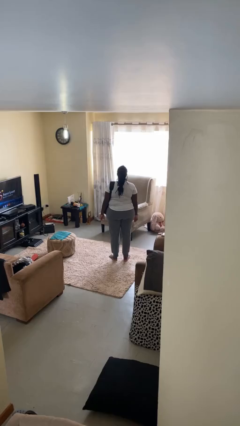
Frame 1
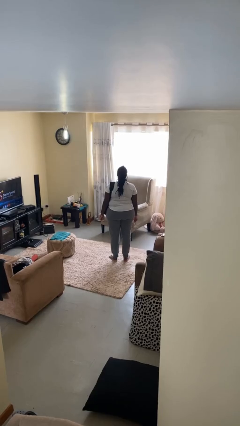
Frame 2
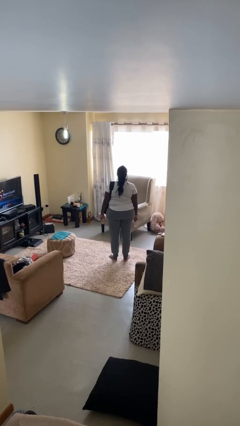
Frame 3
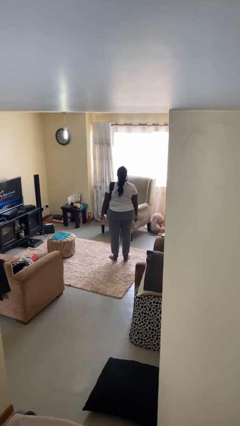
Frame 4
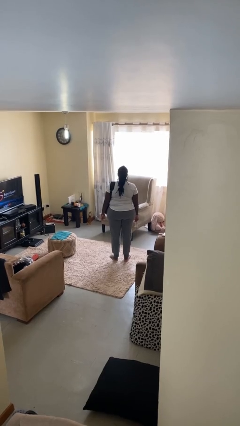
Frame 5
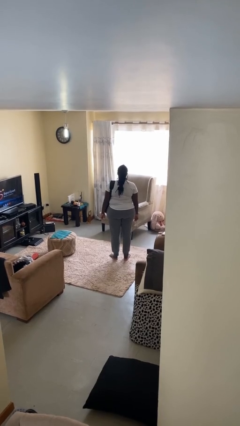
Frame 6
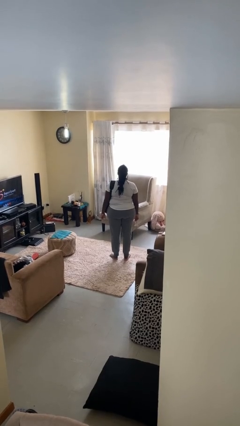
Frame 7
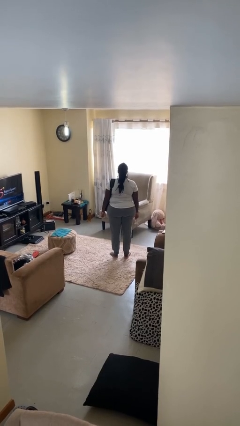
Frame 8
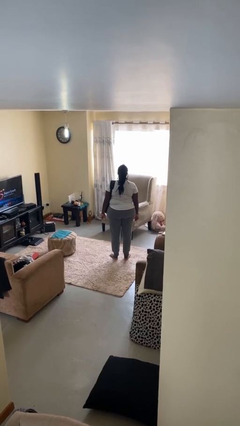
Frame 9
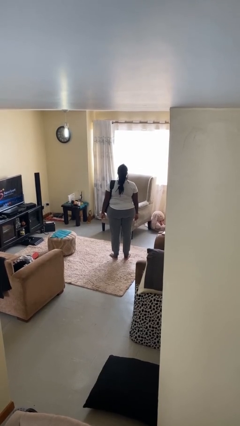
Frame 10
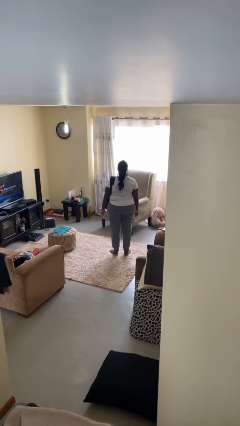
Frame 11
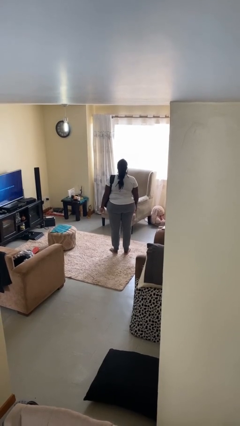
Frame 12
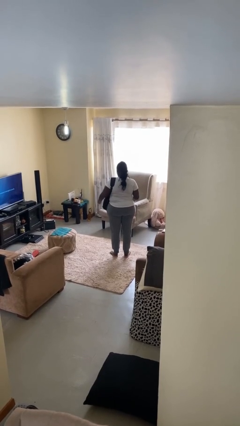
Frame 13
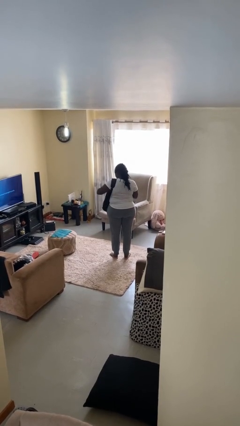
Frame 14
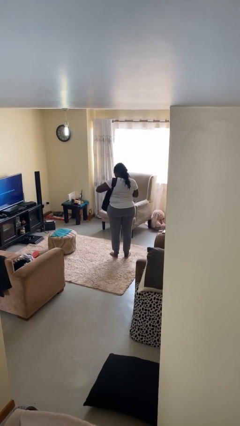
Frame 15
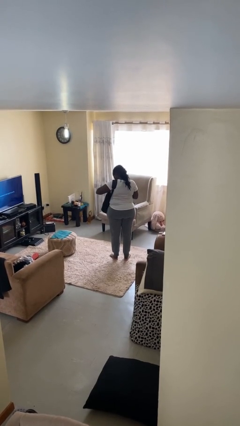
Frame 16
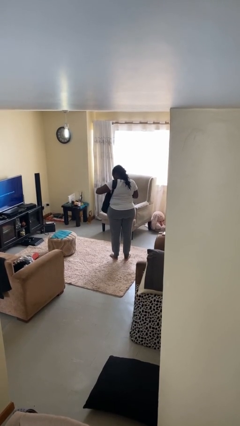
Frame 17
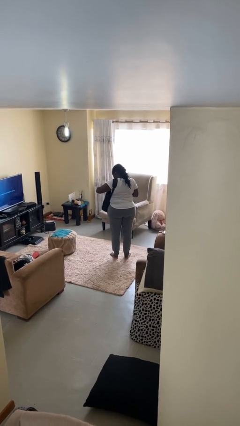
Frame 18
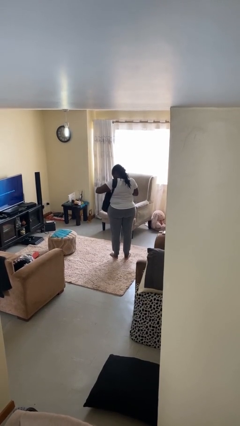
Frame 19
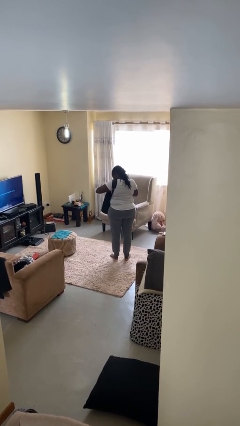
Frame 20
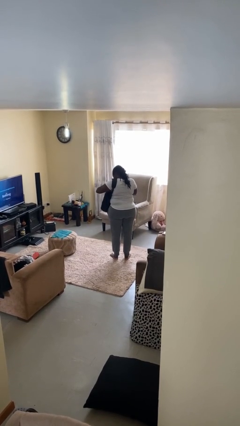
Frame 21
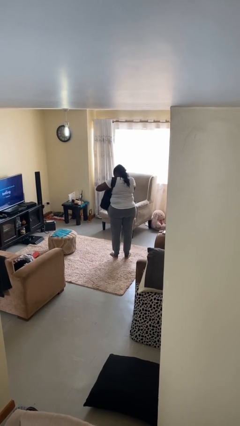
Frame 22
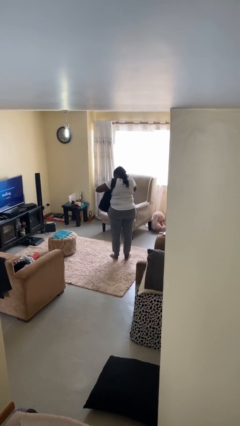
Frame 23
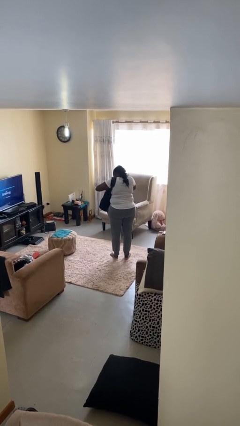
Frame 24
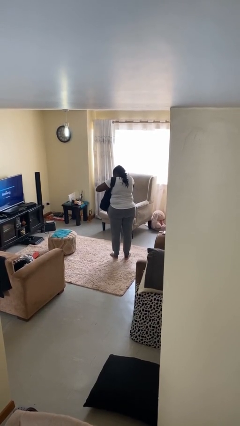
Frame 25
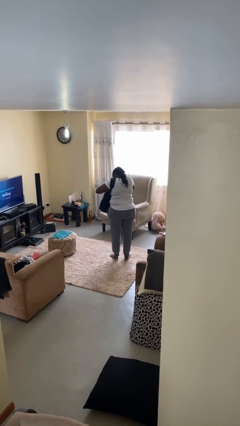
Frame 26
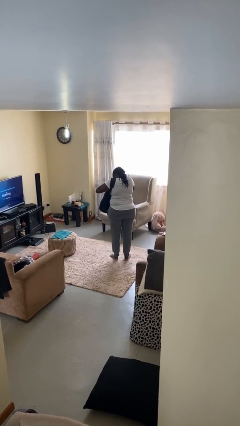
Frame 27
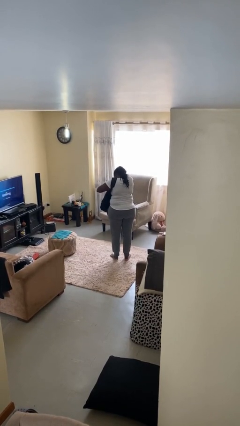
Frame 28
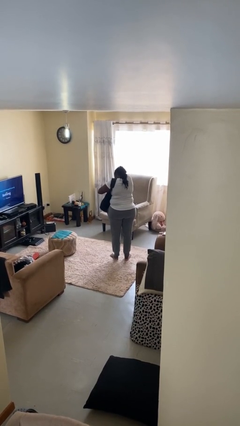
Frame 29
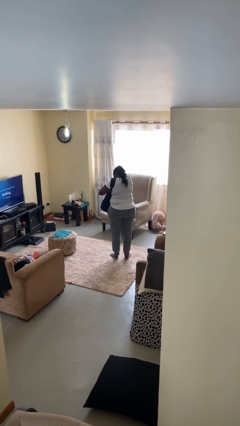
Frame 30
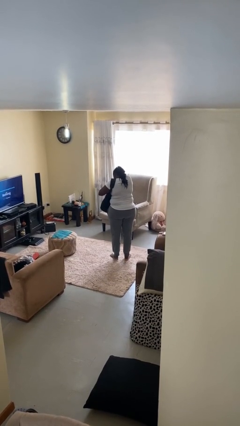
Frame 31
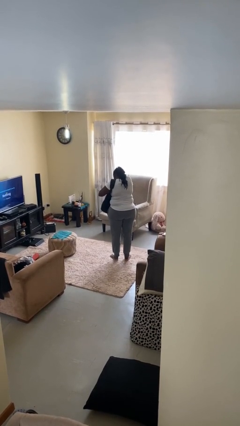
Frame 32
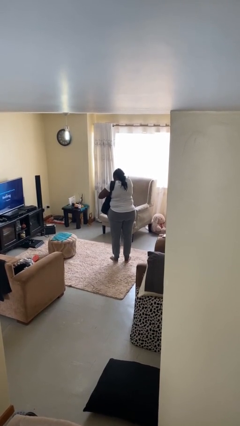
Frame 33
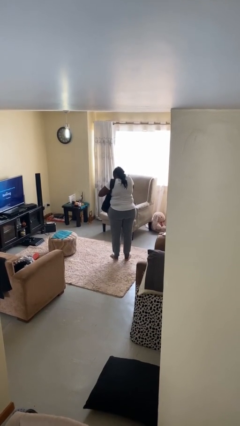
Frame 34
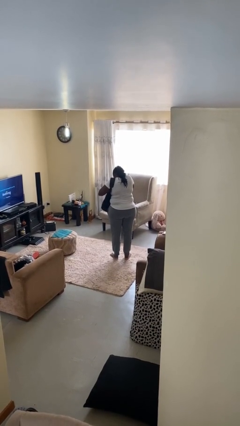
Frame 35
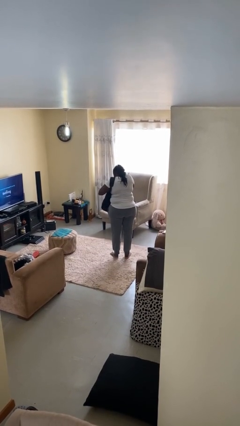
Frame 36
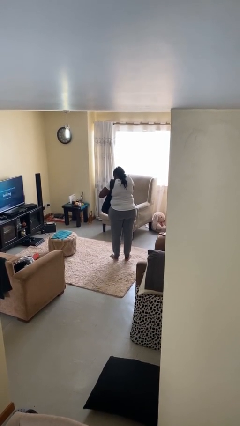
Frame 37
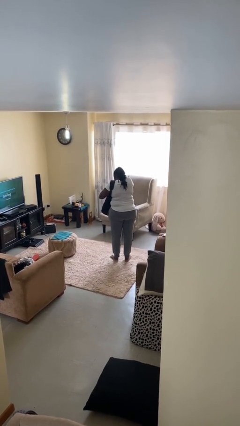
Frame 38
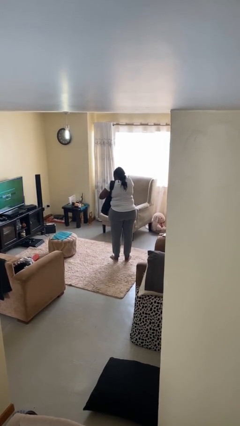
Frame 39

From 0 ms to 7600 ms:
person searches in backpack

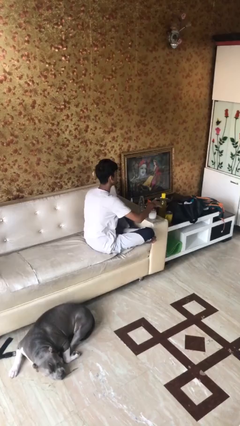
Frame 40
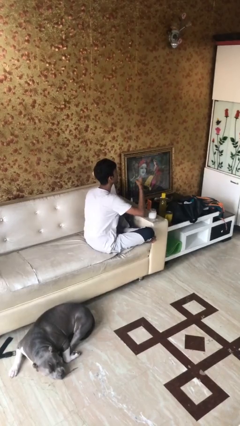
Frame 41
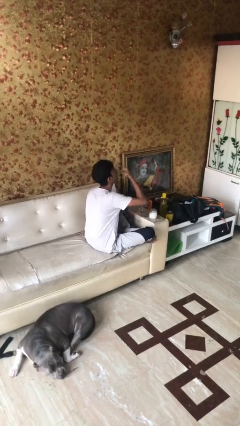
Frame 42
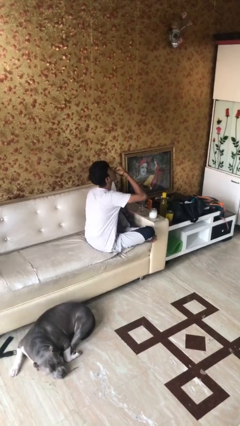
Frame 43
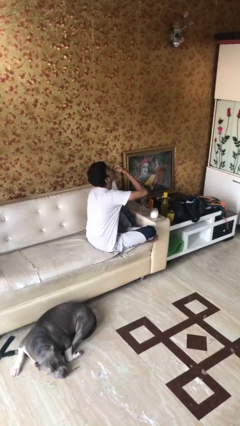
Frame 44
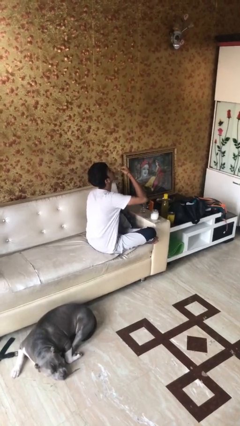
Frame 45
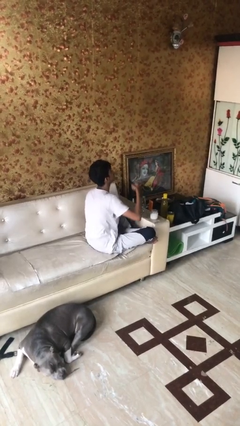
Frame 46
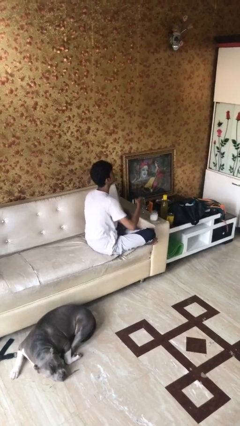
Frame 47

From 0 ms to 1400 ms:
person takes medicine pills

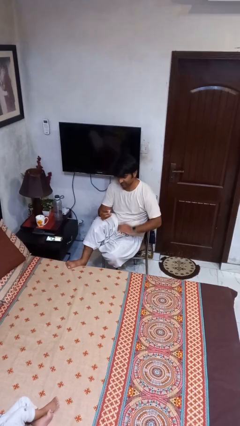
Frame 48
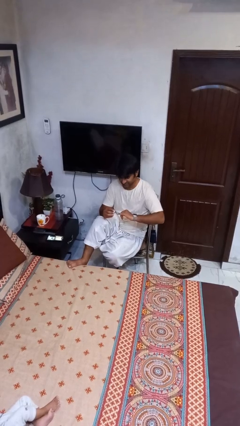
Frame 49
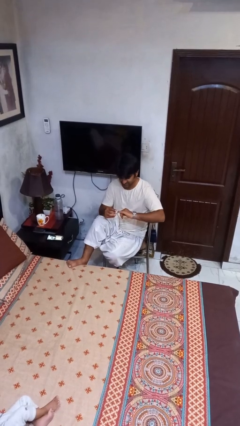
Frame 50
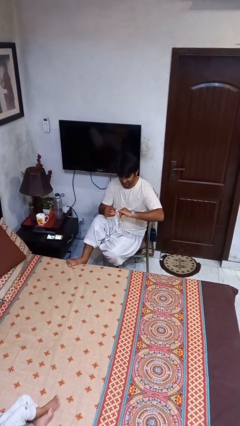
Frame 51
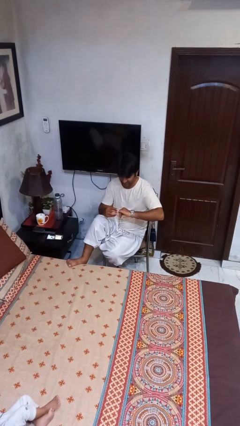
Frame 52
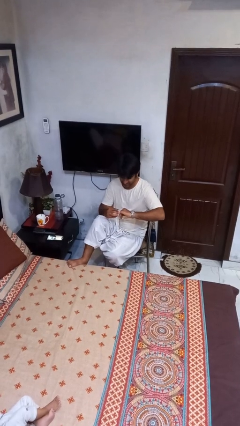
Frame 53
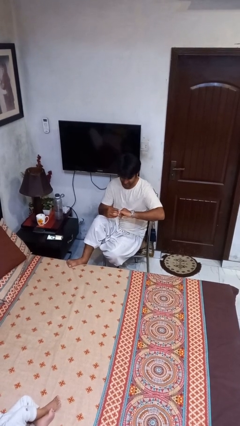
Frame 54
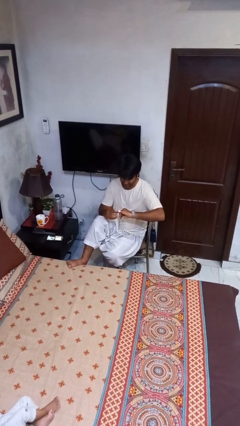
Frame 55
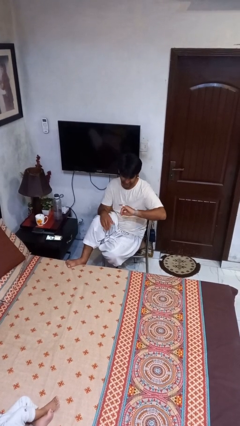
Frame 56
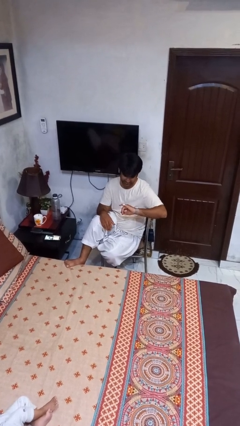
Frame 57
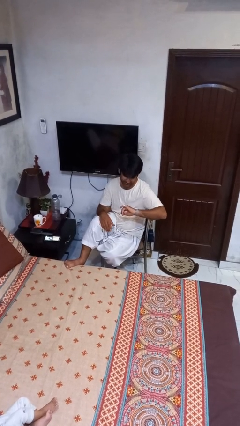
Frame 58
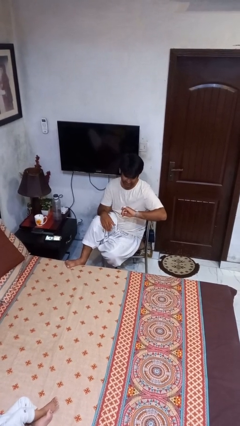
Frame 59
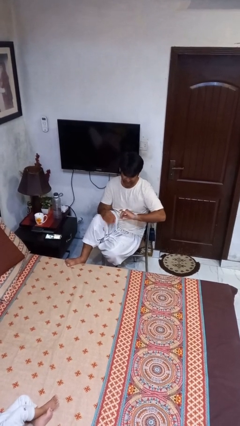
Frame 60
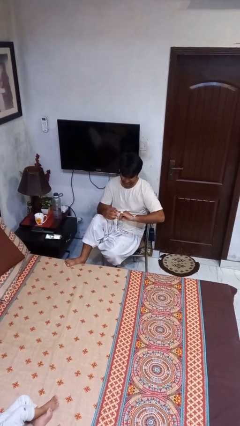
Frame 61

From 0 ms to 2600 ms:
person puts on ring

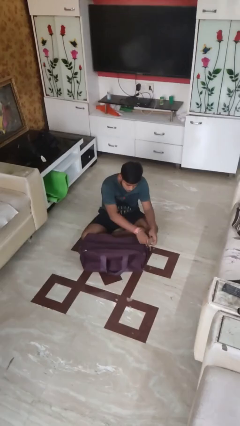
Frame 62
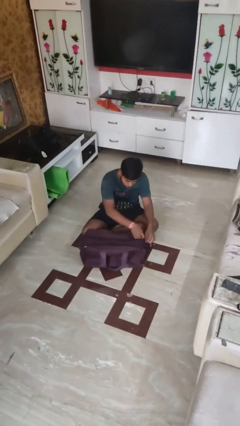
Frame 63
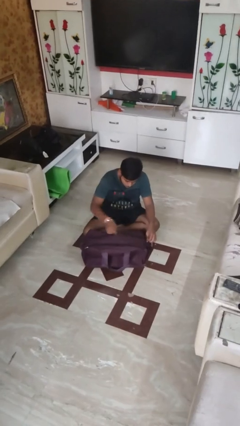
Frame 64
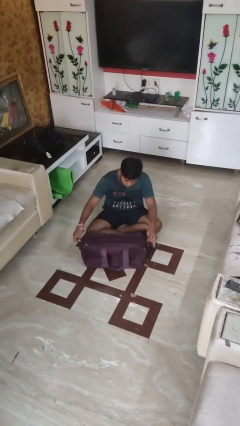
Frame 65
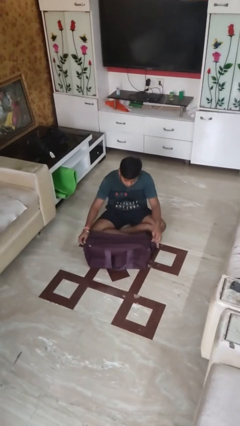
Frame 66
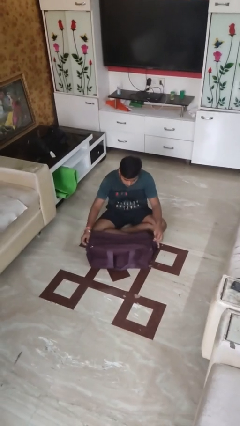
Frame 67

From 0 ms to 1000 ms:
person opens suitcase

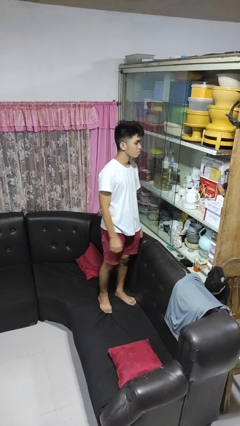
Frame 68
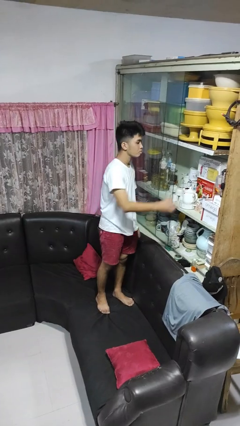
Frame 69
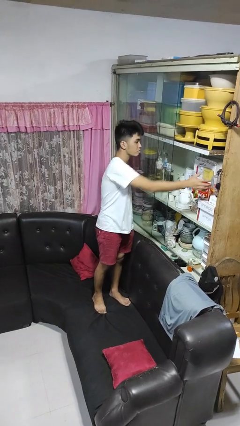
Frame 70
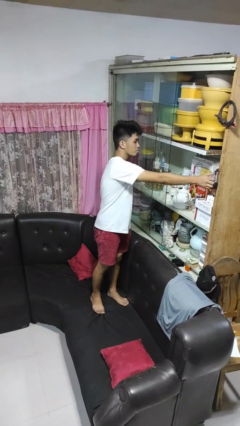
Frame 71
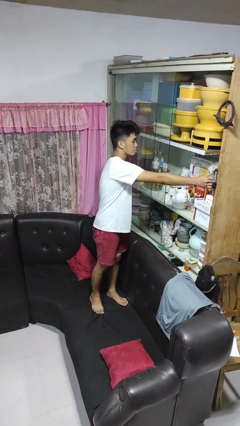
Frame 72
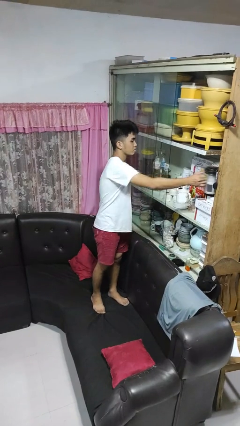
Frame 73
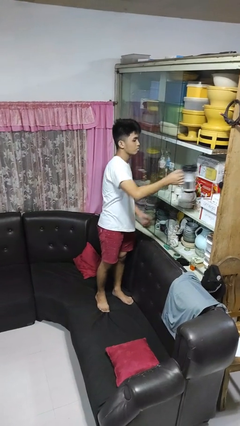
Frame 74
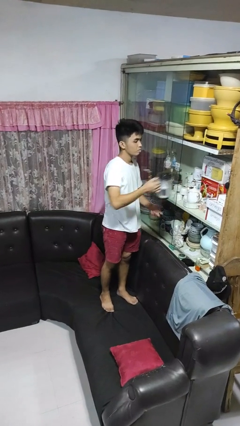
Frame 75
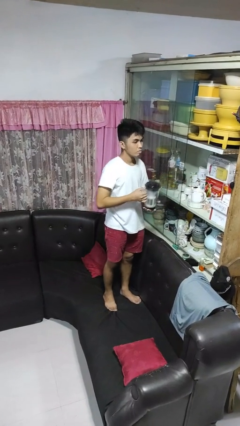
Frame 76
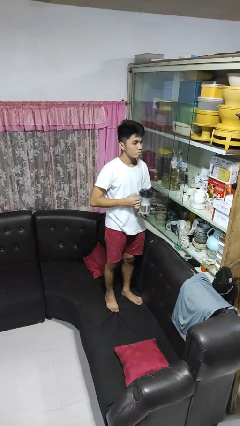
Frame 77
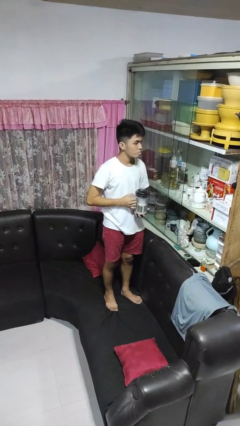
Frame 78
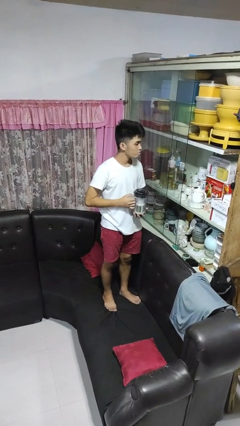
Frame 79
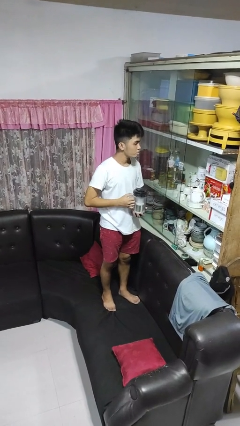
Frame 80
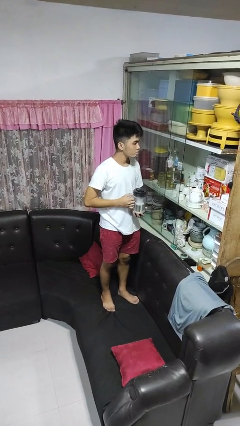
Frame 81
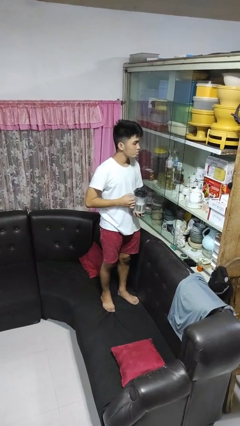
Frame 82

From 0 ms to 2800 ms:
person picks up object from cabinet

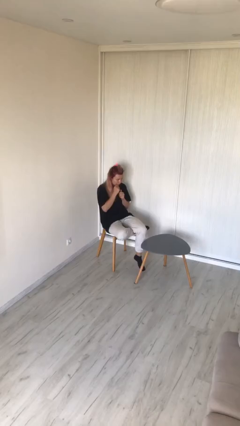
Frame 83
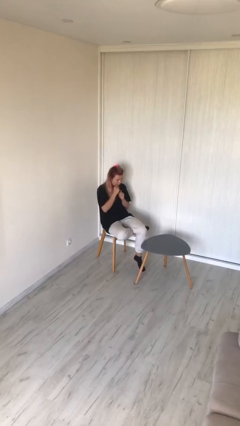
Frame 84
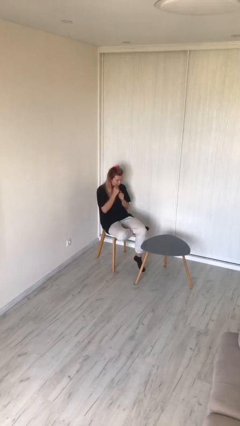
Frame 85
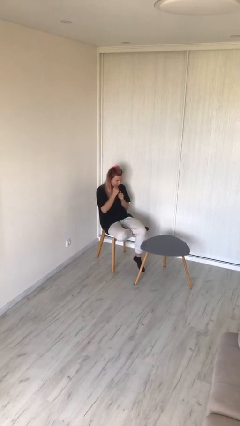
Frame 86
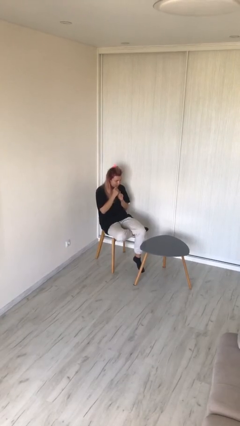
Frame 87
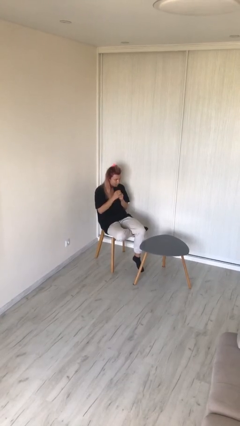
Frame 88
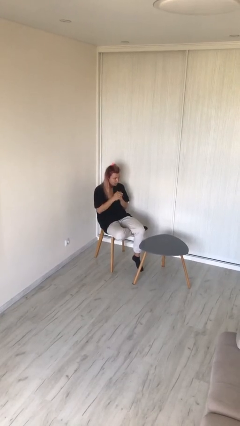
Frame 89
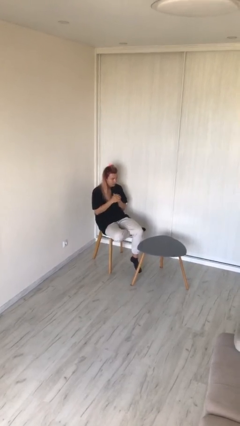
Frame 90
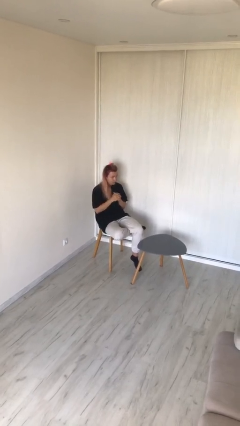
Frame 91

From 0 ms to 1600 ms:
person licks fingers

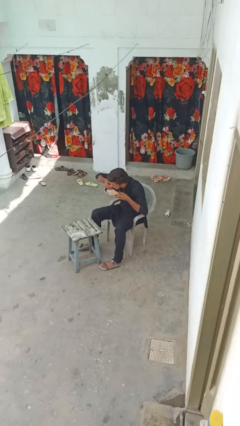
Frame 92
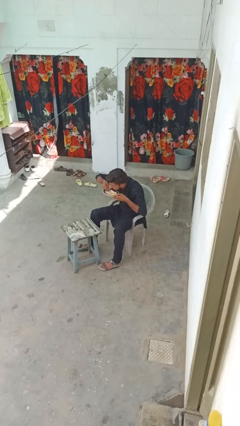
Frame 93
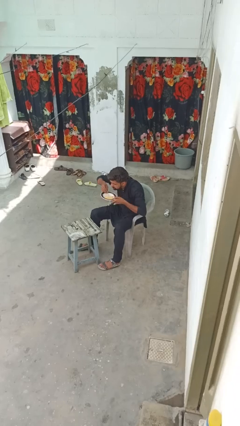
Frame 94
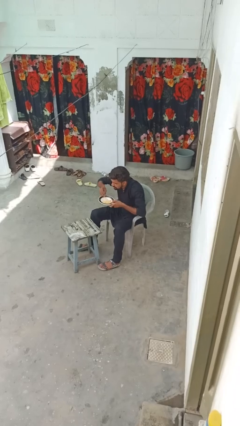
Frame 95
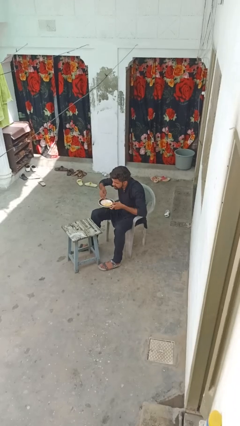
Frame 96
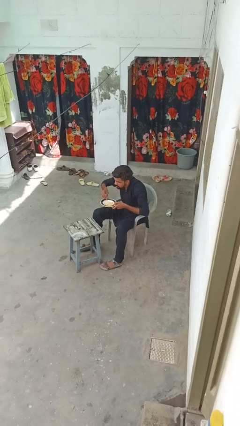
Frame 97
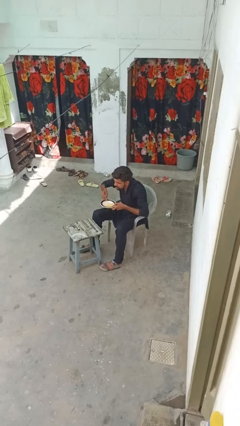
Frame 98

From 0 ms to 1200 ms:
person eats with hands
